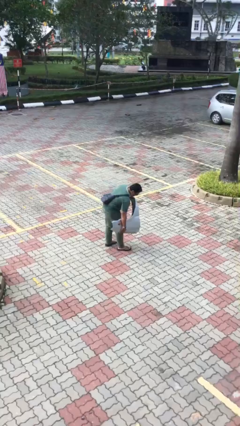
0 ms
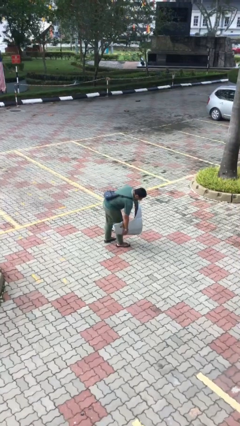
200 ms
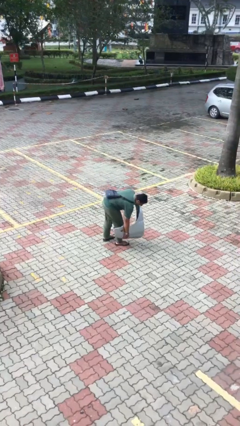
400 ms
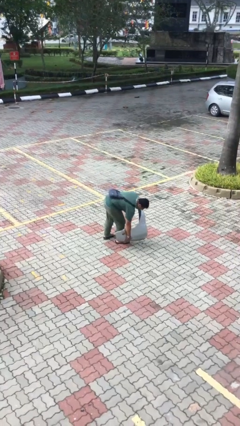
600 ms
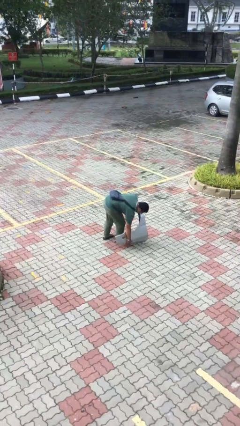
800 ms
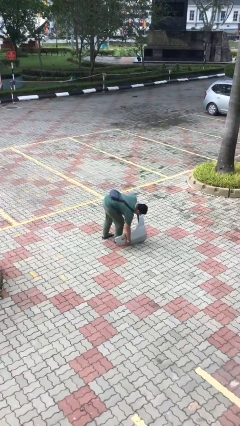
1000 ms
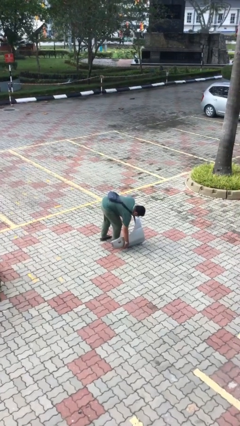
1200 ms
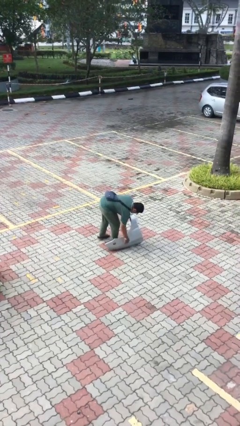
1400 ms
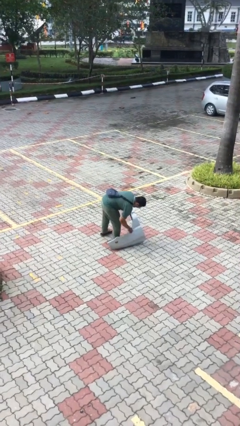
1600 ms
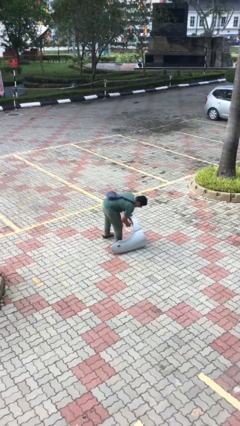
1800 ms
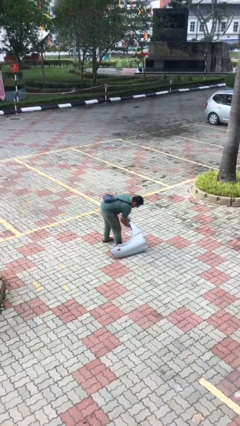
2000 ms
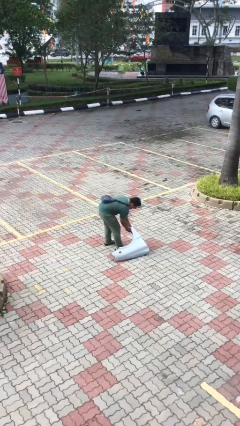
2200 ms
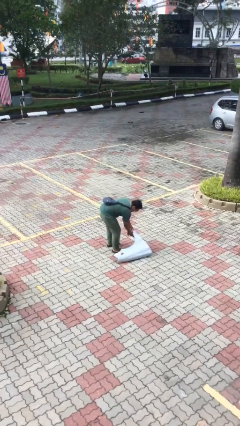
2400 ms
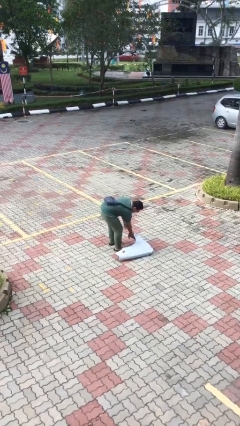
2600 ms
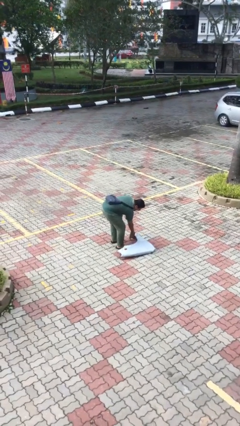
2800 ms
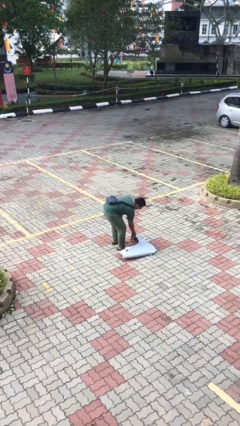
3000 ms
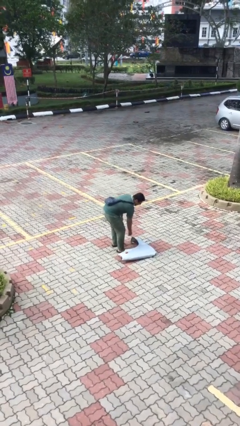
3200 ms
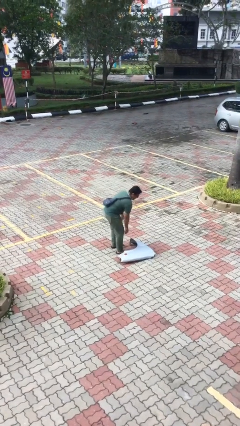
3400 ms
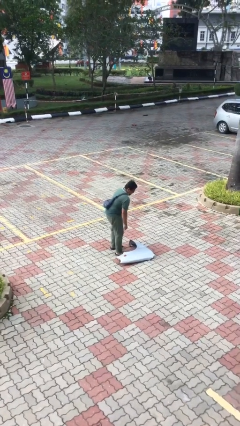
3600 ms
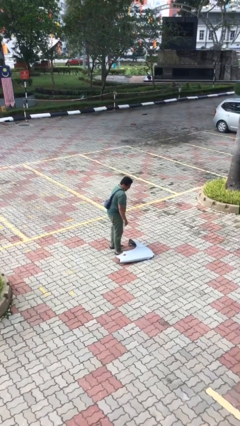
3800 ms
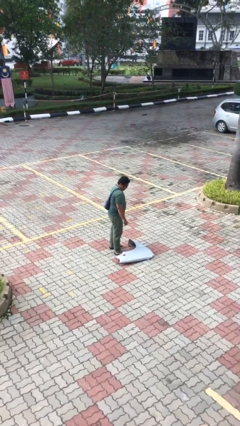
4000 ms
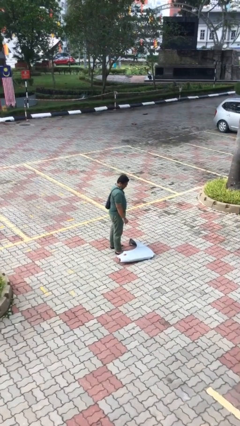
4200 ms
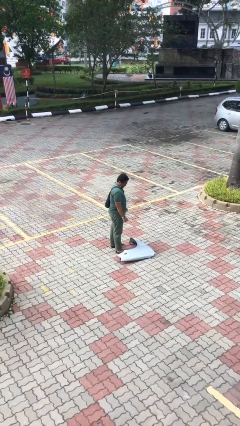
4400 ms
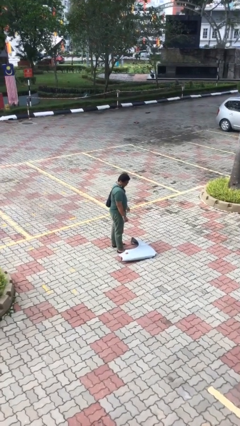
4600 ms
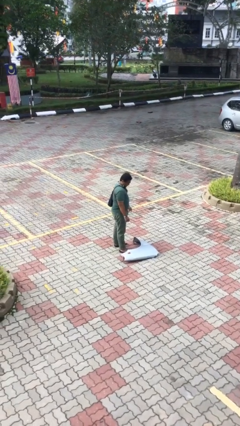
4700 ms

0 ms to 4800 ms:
person puts down object on floor

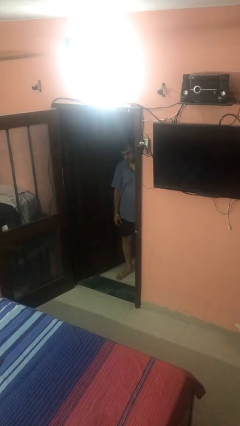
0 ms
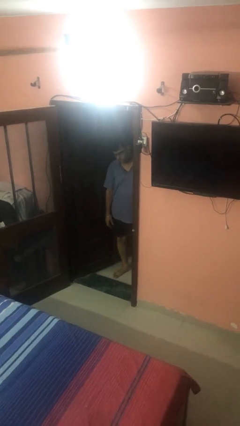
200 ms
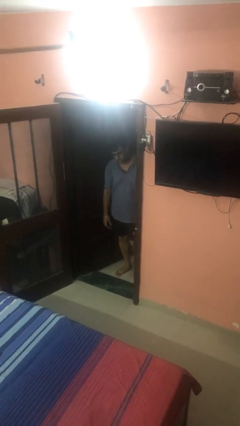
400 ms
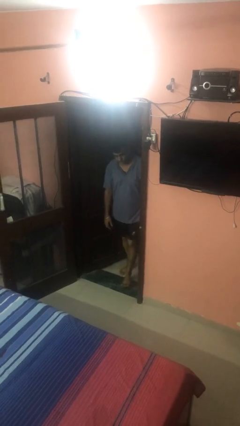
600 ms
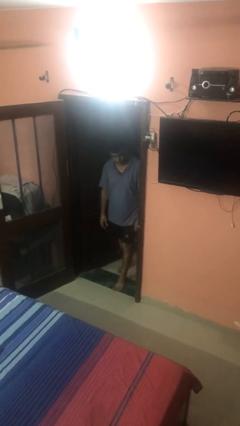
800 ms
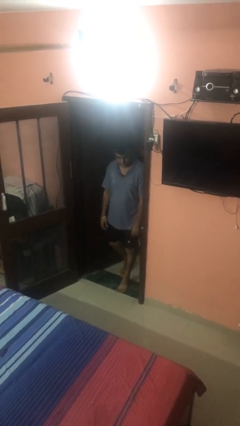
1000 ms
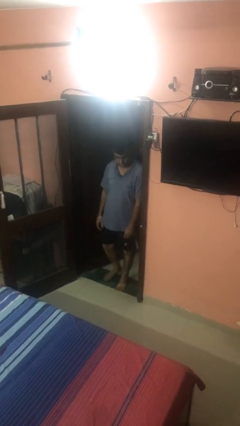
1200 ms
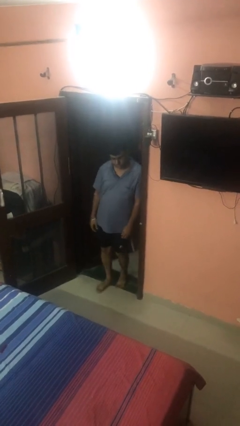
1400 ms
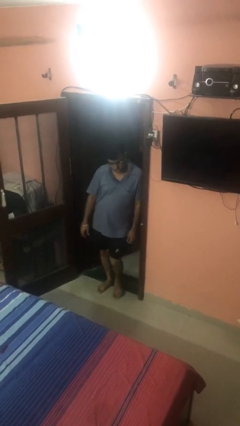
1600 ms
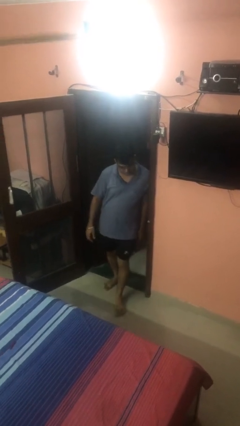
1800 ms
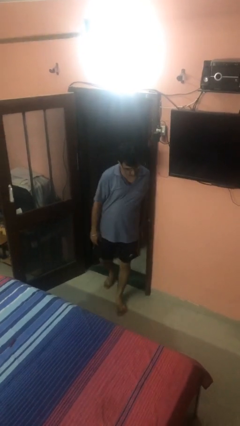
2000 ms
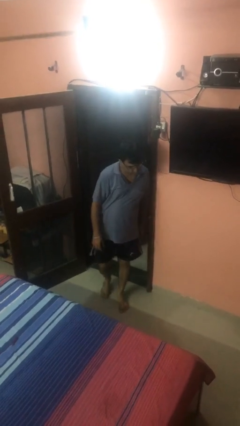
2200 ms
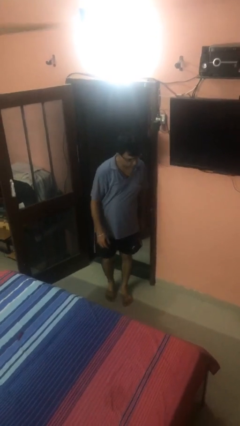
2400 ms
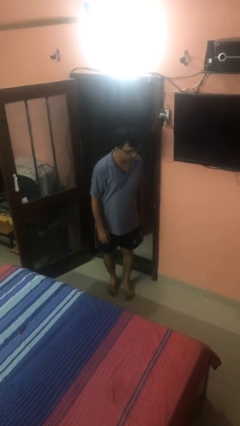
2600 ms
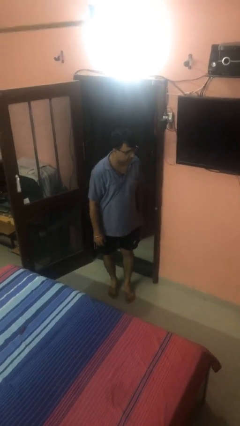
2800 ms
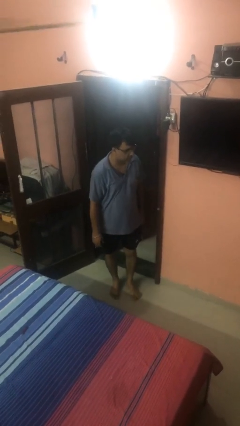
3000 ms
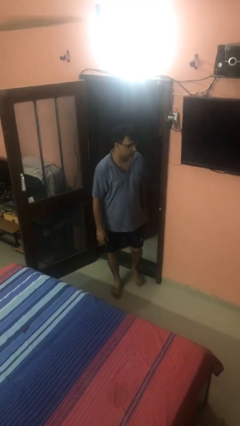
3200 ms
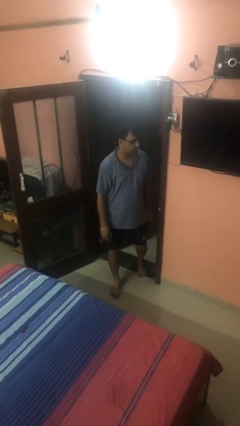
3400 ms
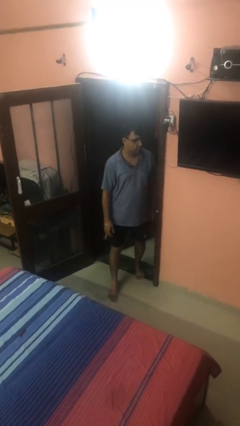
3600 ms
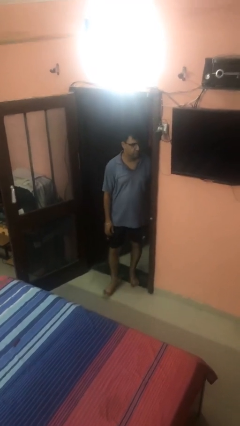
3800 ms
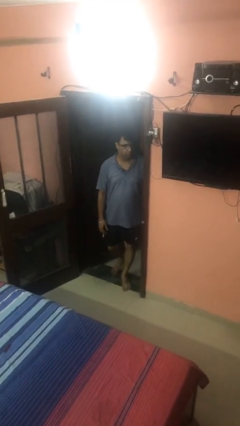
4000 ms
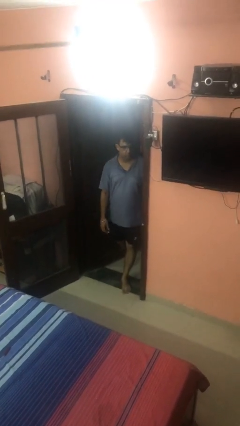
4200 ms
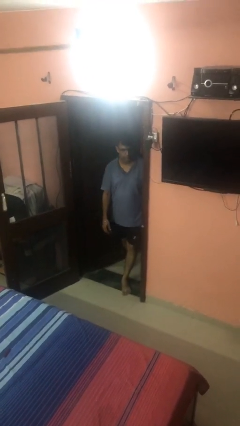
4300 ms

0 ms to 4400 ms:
person bumps into wall

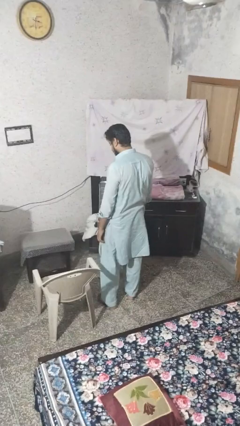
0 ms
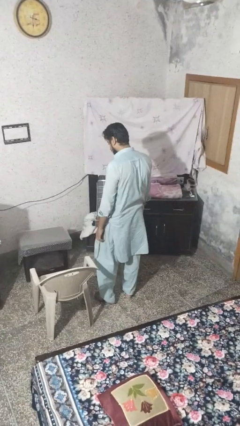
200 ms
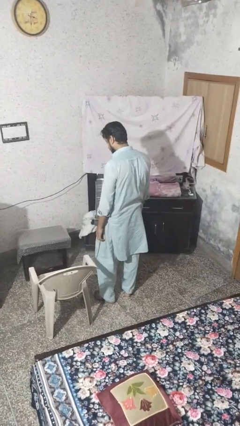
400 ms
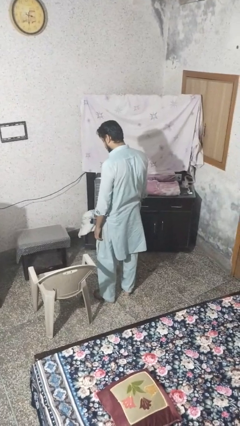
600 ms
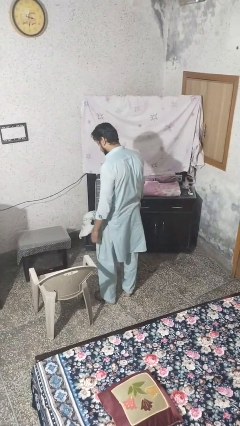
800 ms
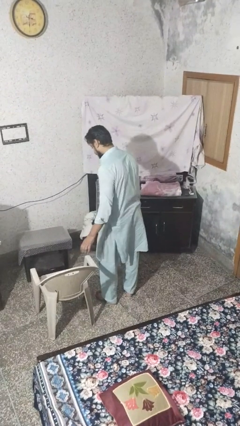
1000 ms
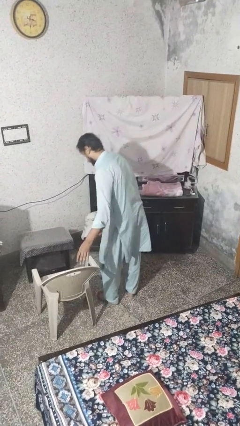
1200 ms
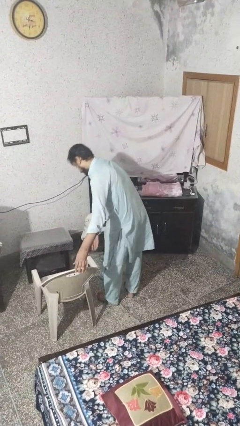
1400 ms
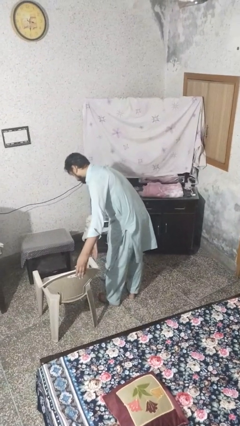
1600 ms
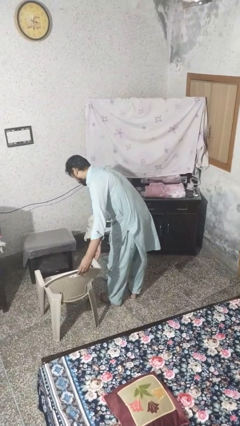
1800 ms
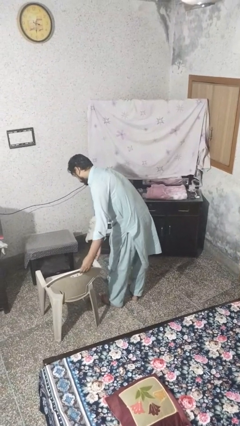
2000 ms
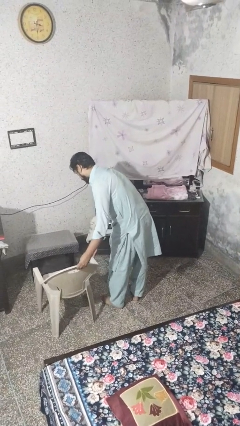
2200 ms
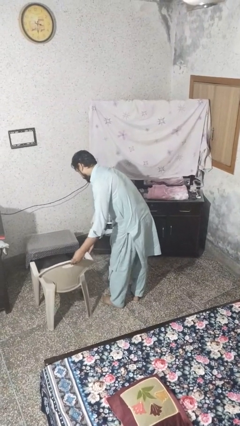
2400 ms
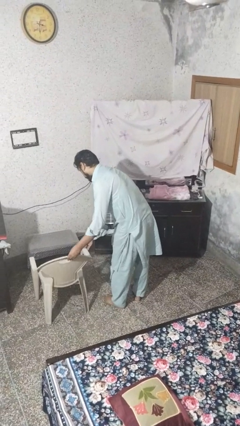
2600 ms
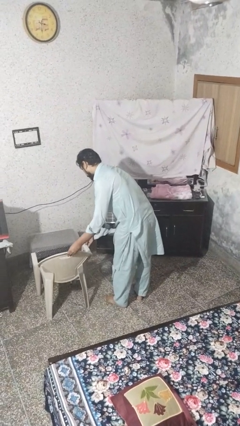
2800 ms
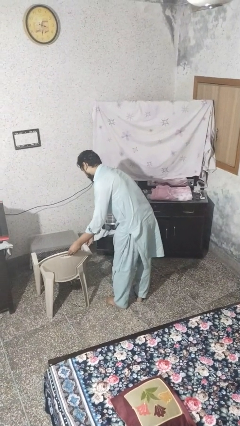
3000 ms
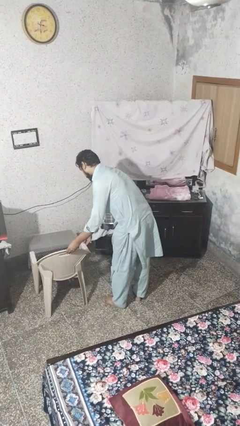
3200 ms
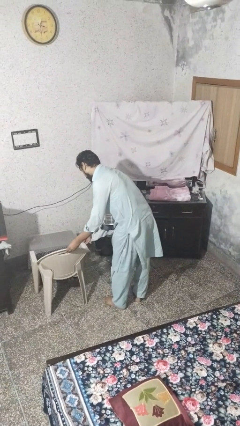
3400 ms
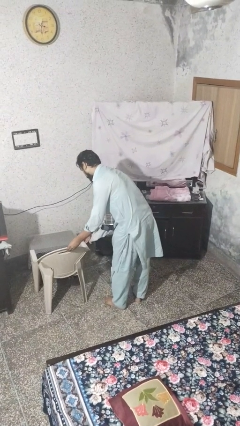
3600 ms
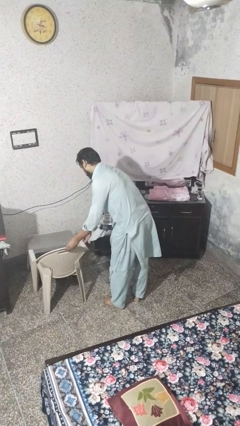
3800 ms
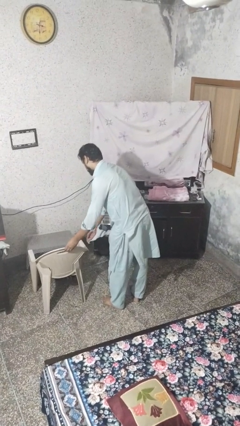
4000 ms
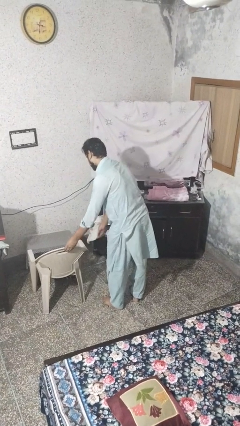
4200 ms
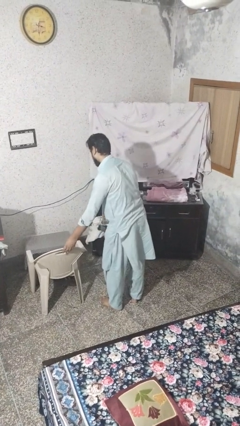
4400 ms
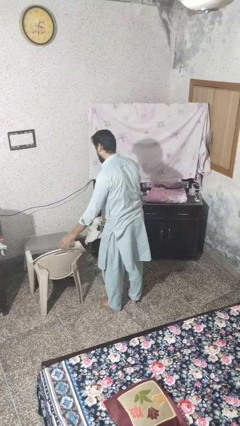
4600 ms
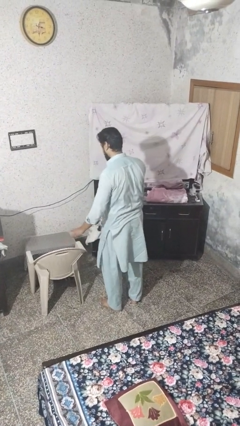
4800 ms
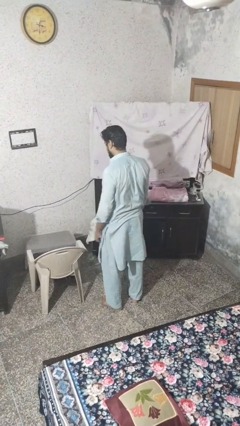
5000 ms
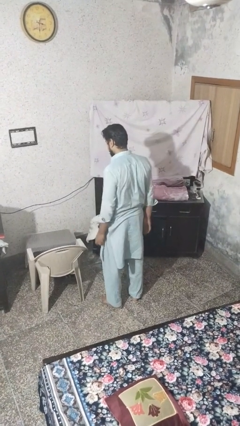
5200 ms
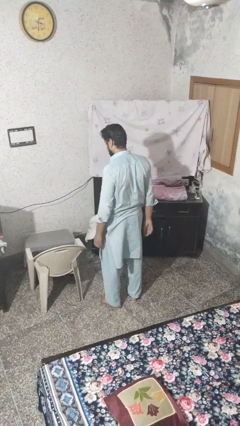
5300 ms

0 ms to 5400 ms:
person pushes in chair

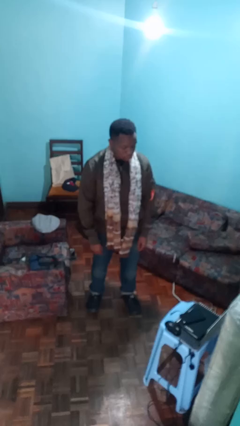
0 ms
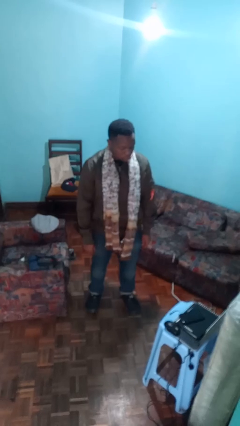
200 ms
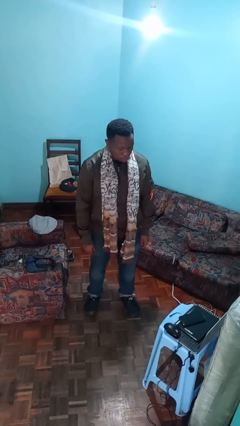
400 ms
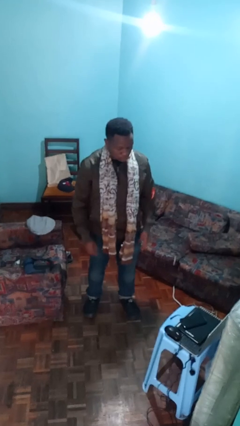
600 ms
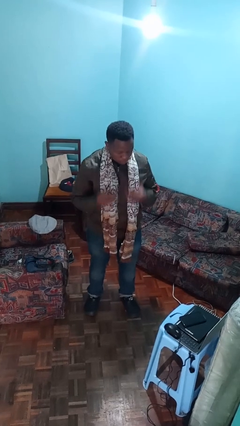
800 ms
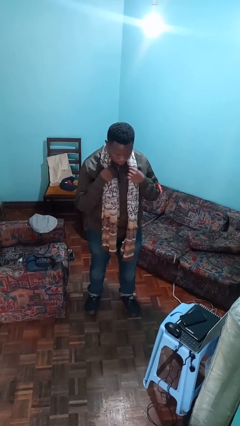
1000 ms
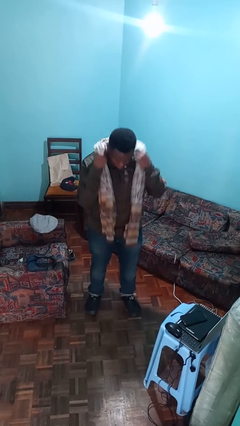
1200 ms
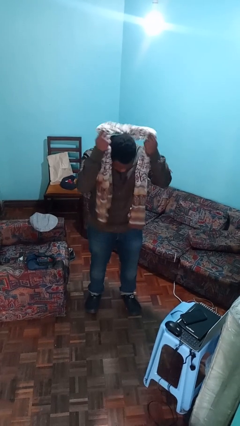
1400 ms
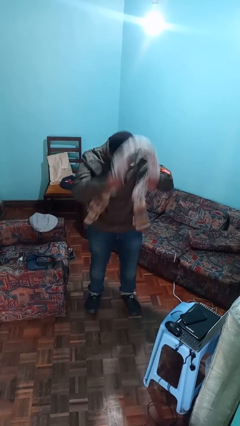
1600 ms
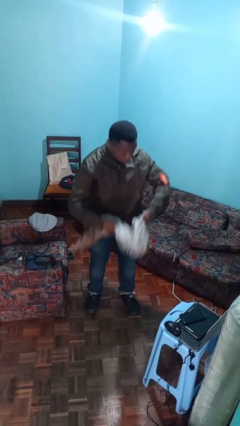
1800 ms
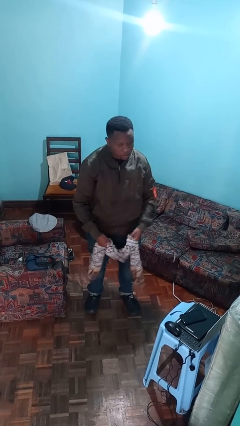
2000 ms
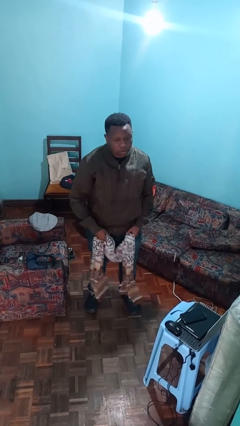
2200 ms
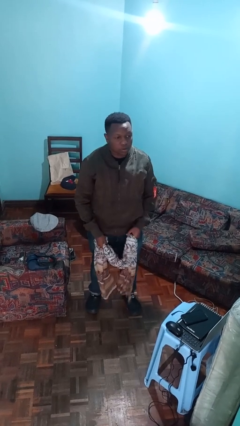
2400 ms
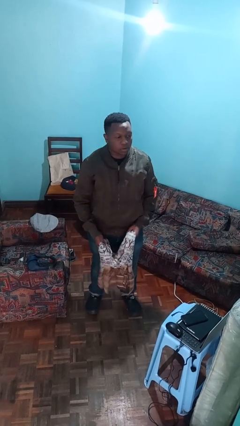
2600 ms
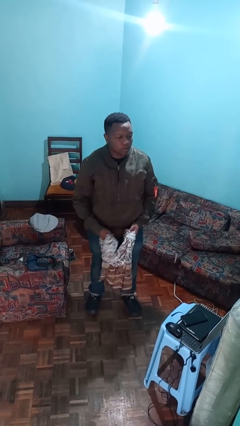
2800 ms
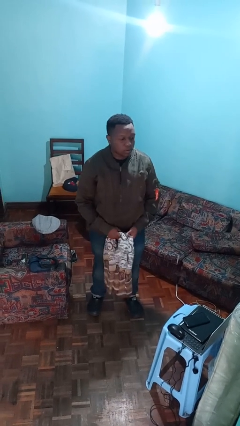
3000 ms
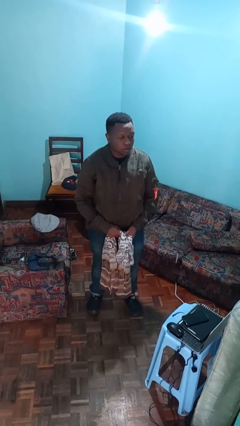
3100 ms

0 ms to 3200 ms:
person takes off scarf

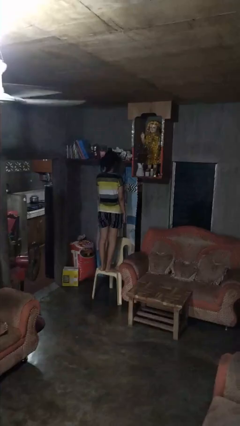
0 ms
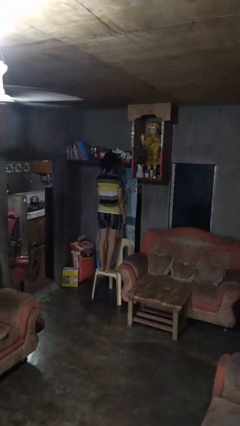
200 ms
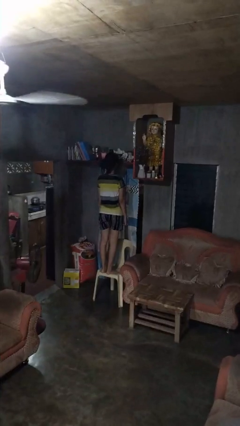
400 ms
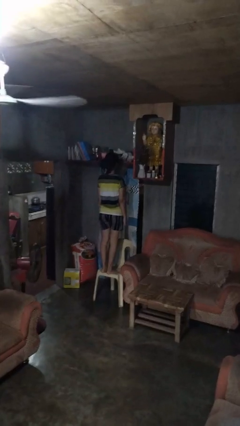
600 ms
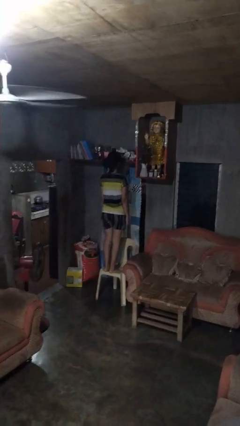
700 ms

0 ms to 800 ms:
person climbs off chair
